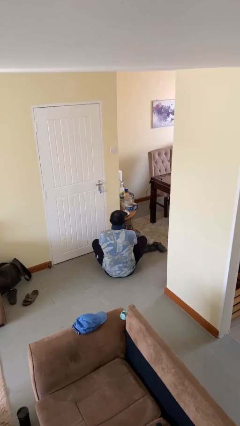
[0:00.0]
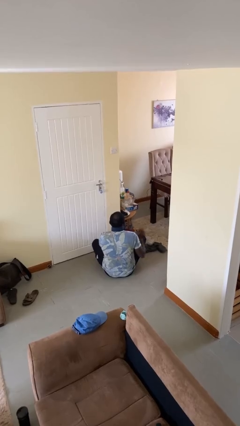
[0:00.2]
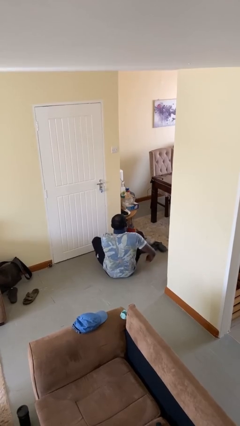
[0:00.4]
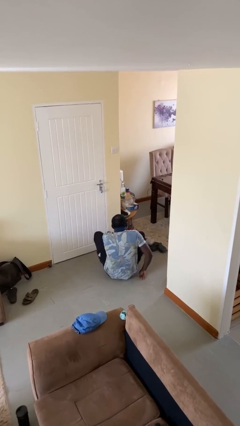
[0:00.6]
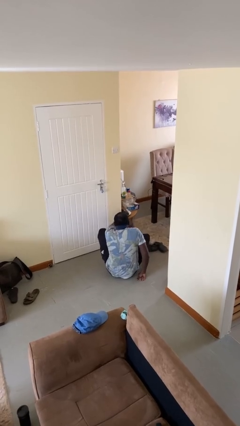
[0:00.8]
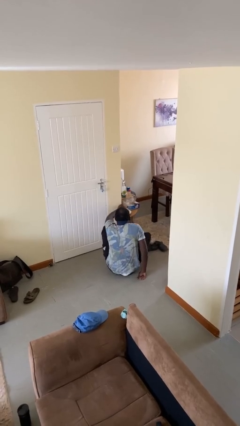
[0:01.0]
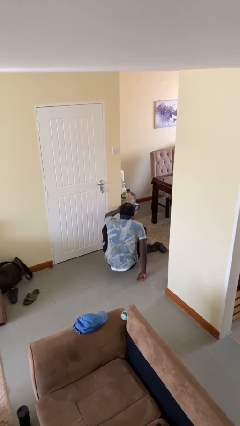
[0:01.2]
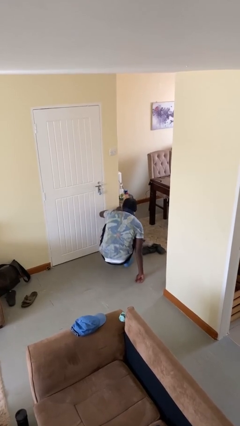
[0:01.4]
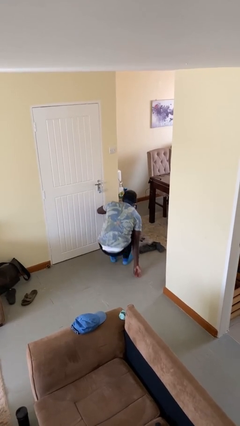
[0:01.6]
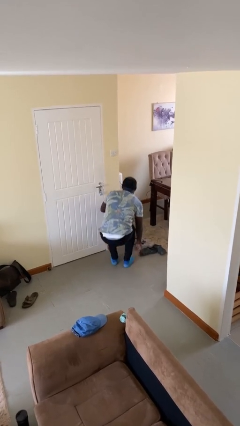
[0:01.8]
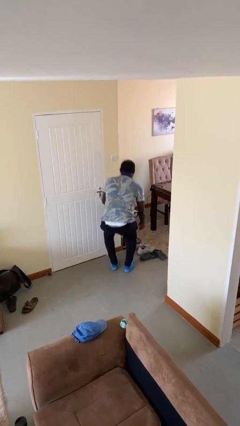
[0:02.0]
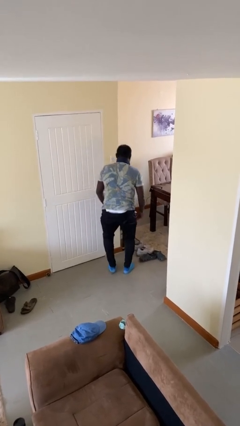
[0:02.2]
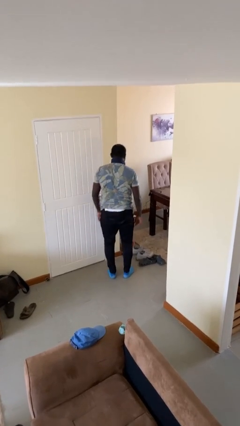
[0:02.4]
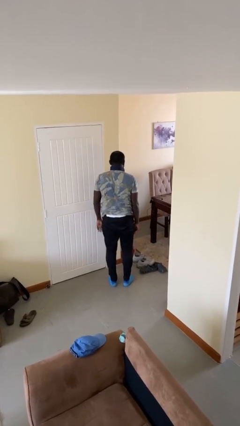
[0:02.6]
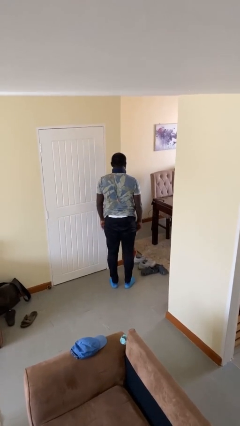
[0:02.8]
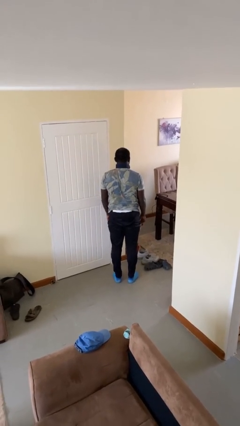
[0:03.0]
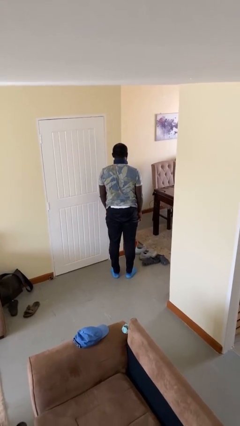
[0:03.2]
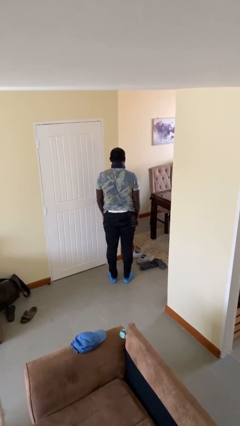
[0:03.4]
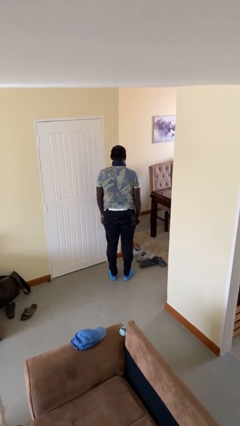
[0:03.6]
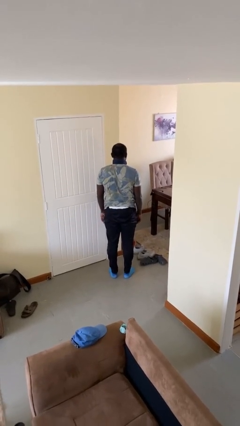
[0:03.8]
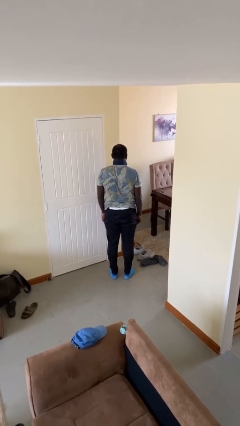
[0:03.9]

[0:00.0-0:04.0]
person stands up from floor

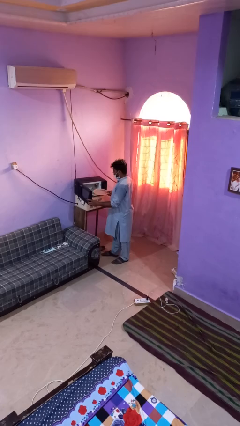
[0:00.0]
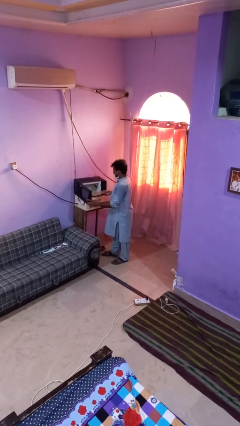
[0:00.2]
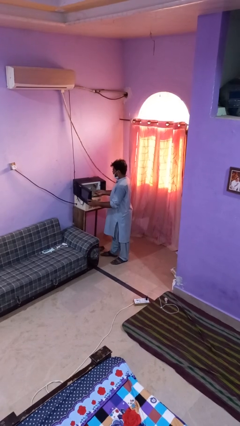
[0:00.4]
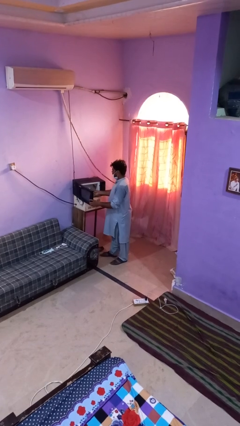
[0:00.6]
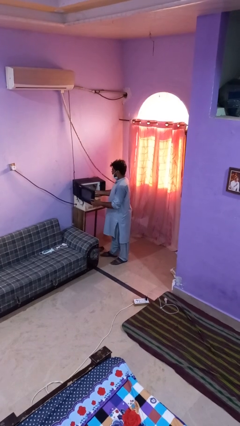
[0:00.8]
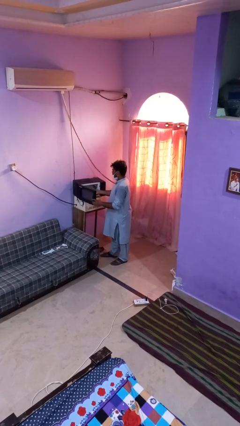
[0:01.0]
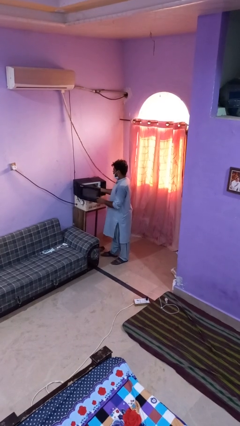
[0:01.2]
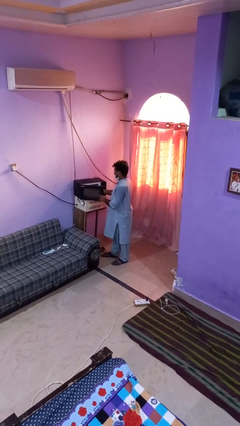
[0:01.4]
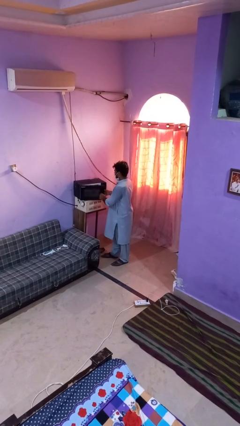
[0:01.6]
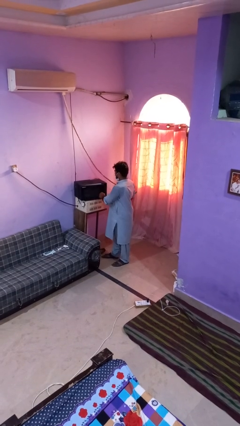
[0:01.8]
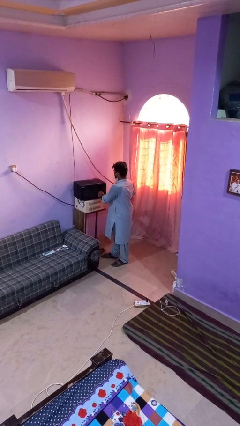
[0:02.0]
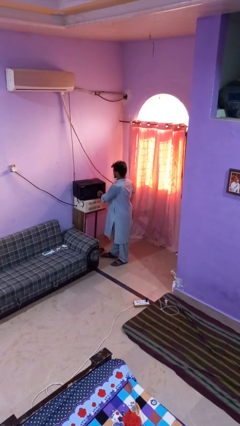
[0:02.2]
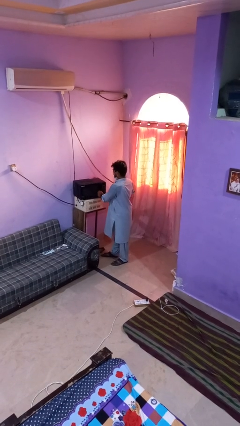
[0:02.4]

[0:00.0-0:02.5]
person puts object into oven

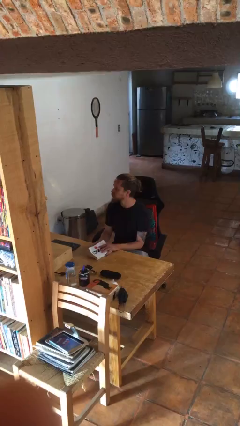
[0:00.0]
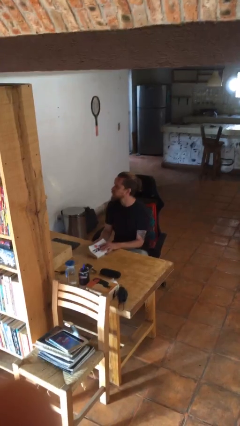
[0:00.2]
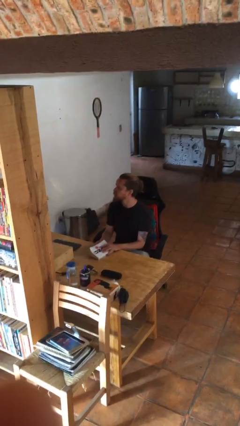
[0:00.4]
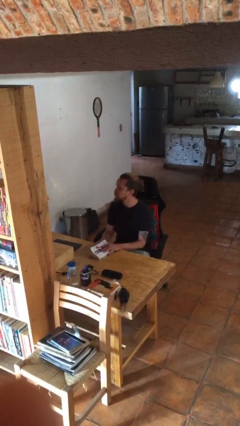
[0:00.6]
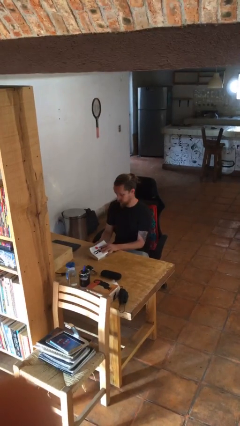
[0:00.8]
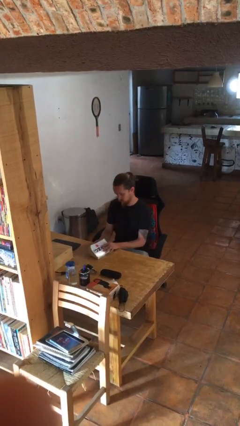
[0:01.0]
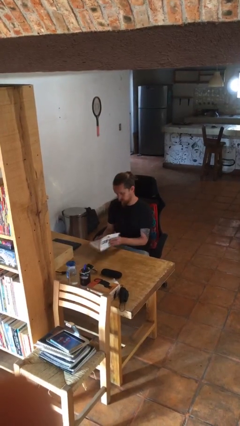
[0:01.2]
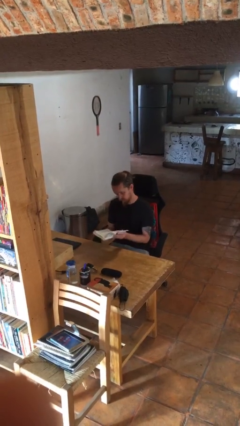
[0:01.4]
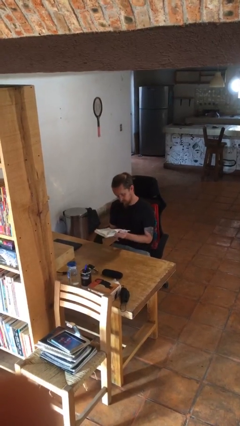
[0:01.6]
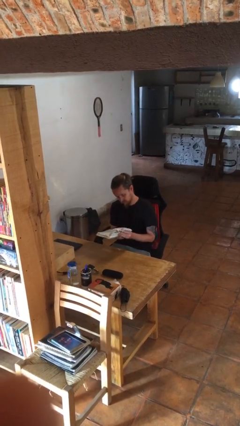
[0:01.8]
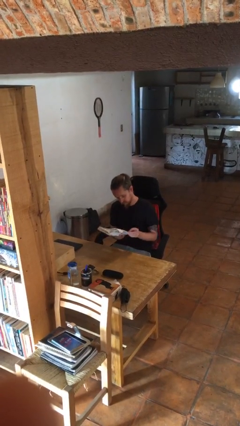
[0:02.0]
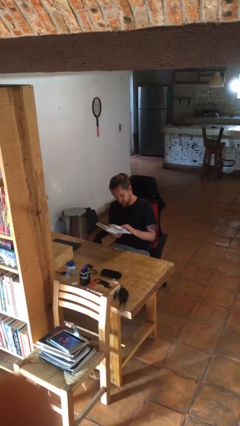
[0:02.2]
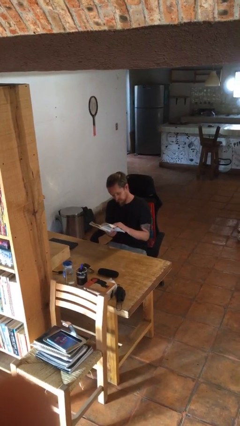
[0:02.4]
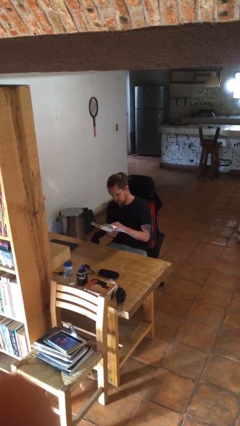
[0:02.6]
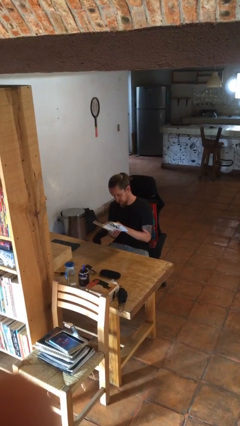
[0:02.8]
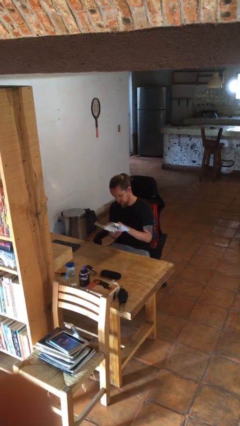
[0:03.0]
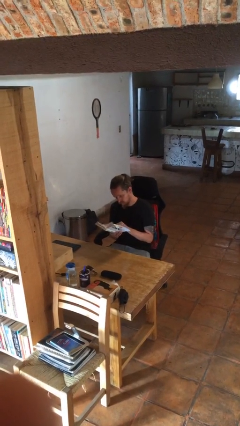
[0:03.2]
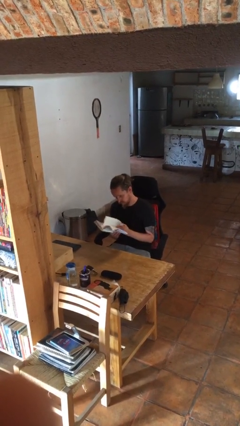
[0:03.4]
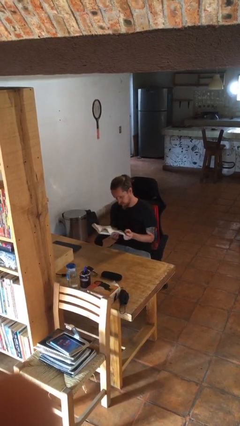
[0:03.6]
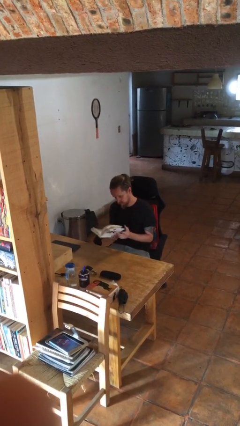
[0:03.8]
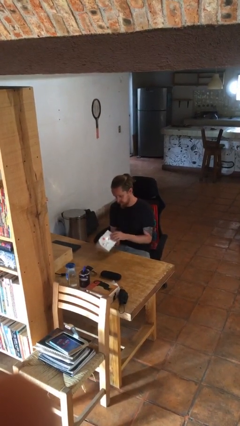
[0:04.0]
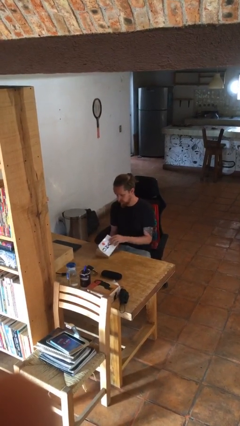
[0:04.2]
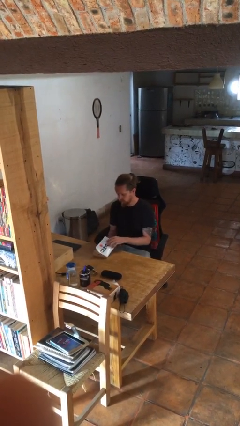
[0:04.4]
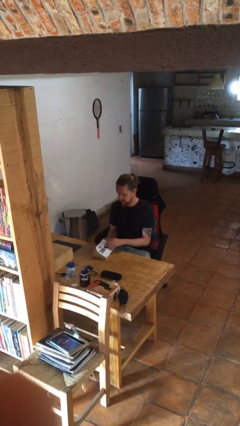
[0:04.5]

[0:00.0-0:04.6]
person reads book

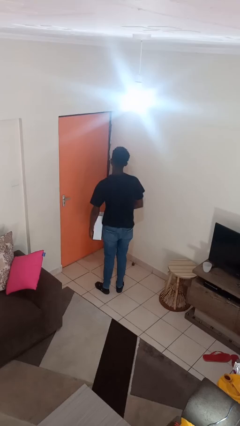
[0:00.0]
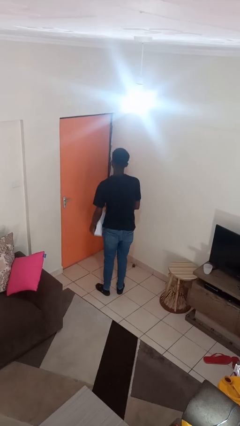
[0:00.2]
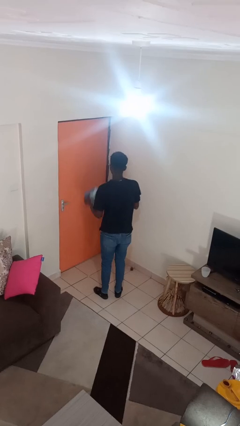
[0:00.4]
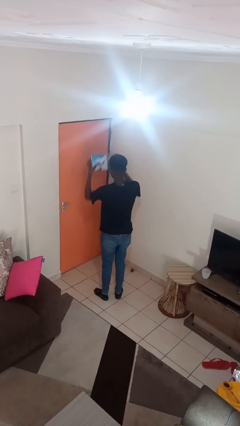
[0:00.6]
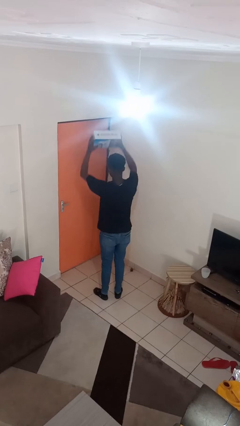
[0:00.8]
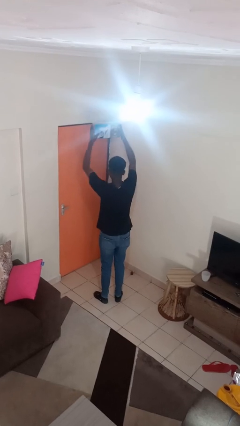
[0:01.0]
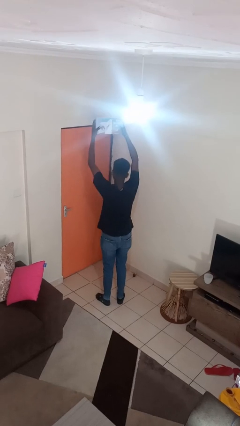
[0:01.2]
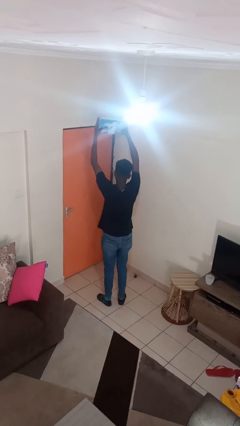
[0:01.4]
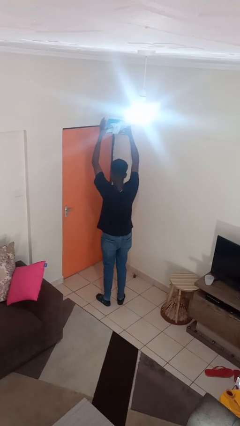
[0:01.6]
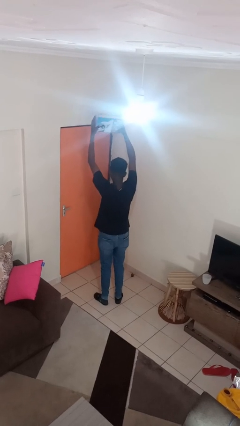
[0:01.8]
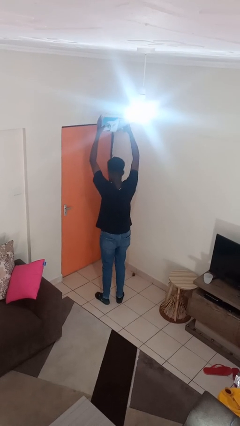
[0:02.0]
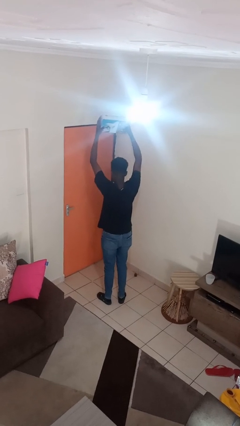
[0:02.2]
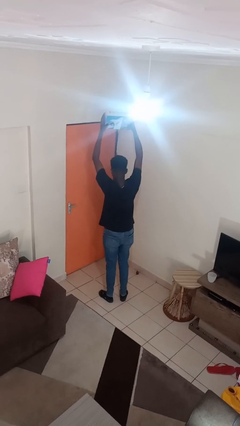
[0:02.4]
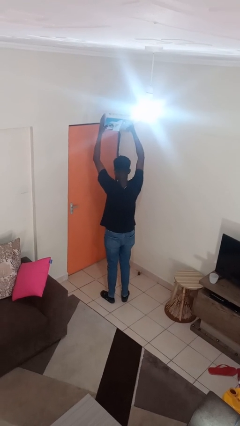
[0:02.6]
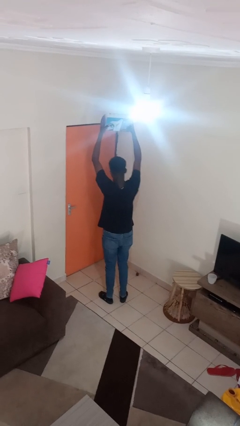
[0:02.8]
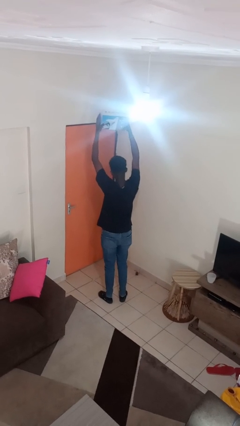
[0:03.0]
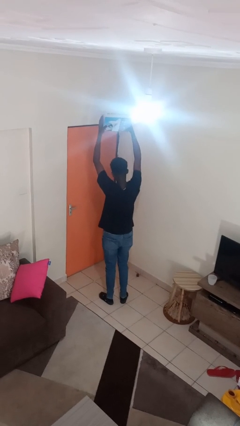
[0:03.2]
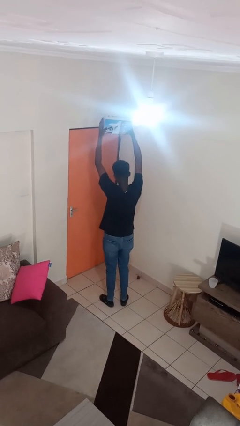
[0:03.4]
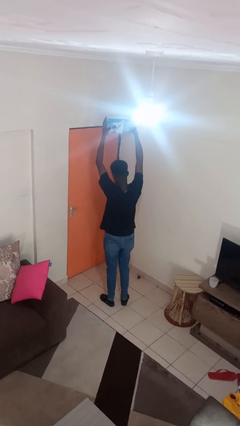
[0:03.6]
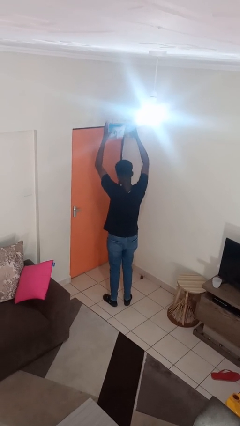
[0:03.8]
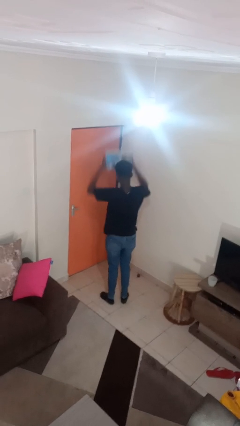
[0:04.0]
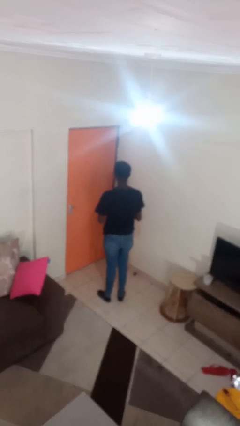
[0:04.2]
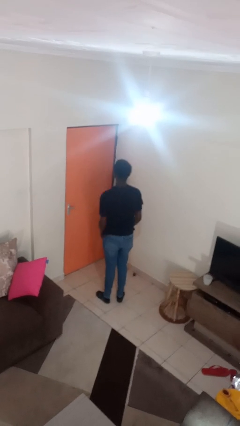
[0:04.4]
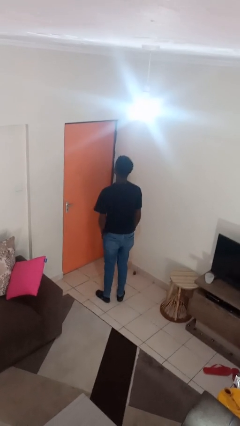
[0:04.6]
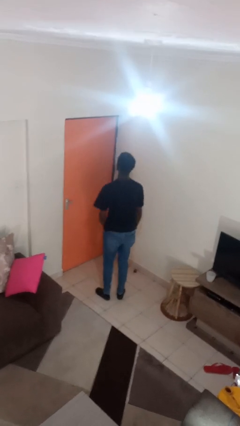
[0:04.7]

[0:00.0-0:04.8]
person holds object above head

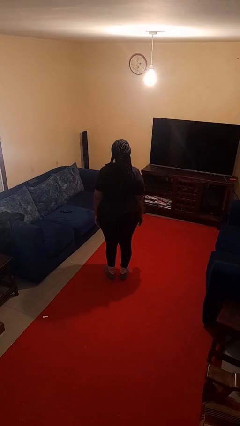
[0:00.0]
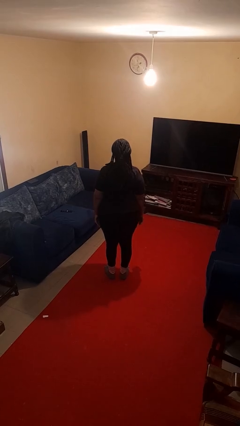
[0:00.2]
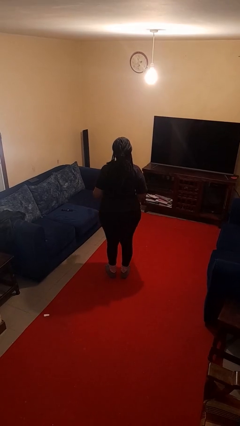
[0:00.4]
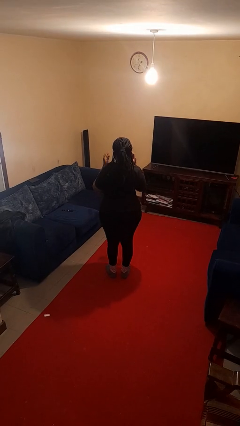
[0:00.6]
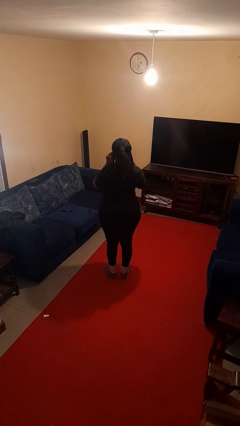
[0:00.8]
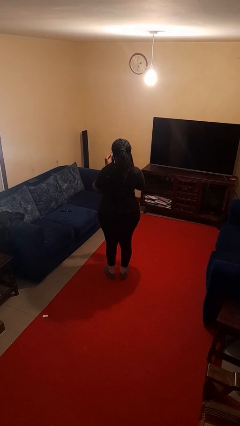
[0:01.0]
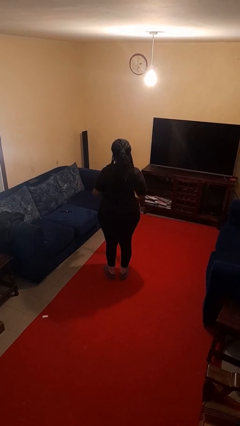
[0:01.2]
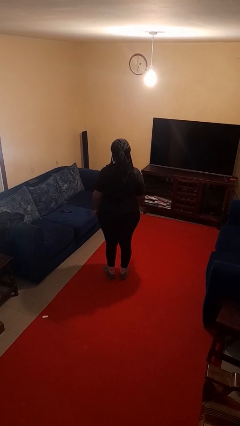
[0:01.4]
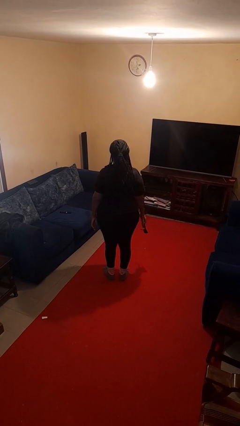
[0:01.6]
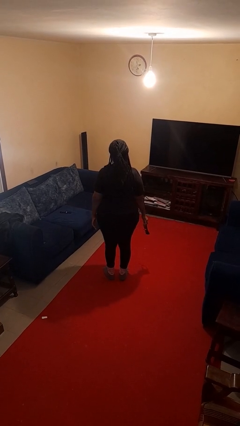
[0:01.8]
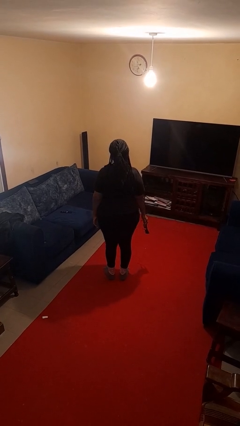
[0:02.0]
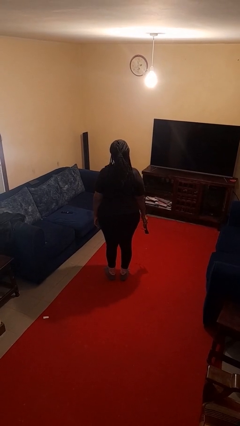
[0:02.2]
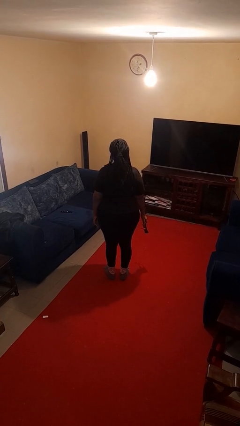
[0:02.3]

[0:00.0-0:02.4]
person takes off sunglasses
